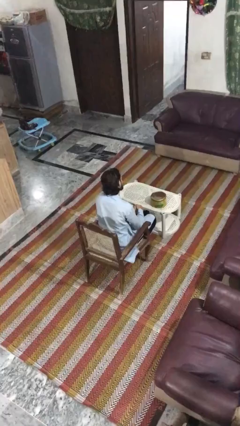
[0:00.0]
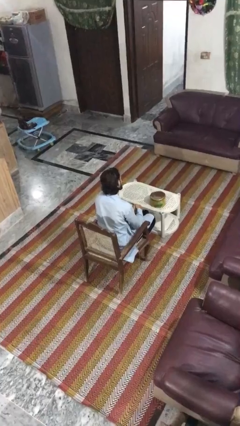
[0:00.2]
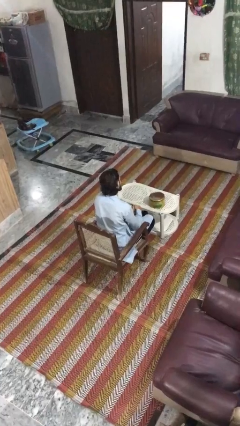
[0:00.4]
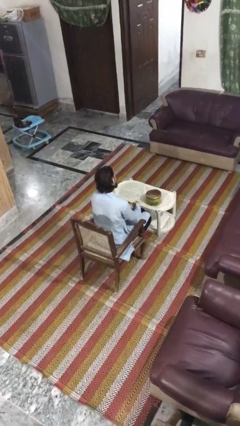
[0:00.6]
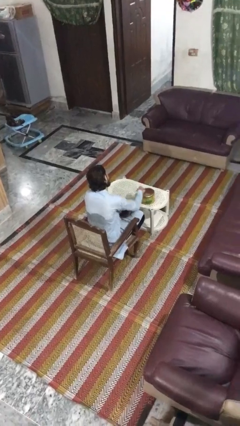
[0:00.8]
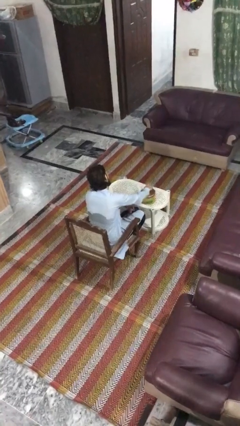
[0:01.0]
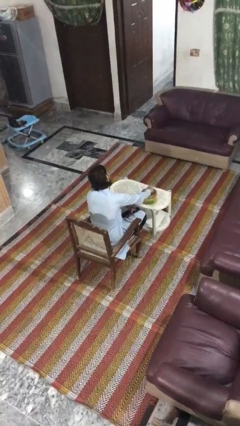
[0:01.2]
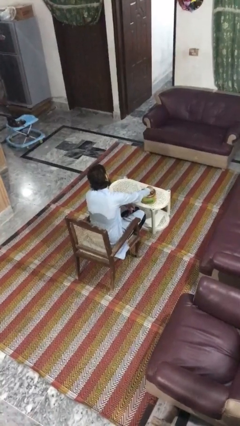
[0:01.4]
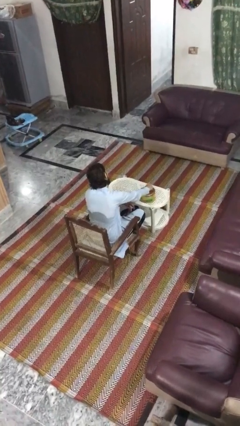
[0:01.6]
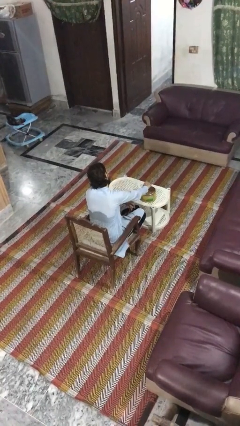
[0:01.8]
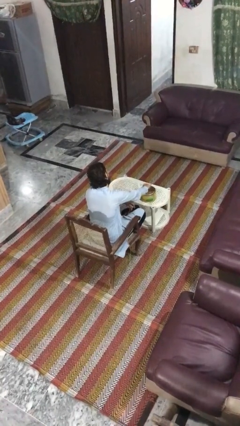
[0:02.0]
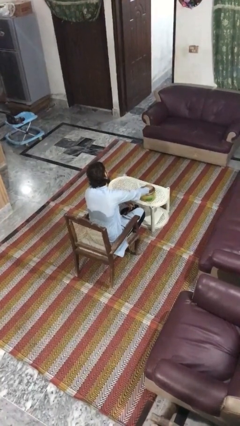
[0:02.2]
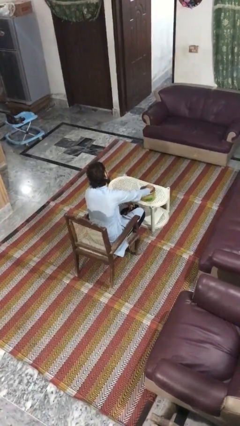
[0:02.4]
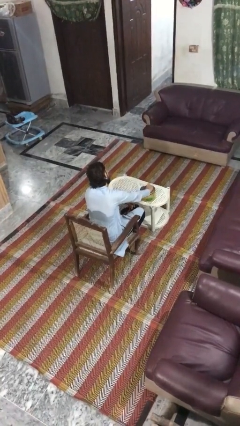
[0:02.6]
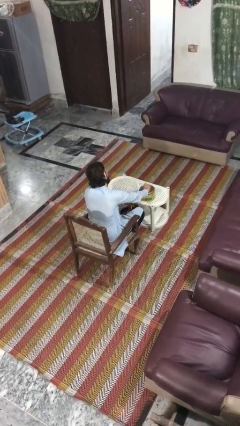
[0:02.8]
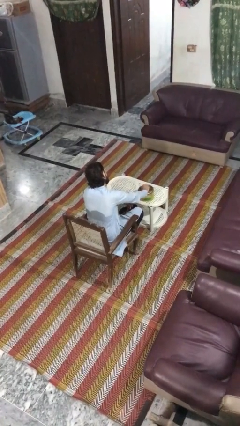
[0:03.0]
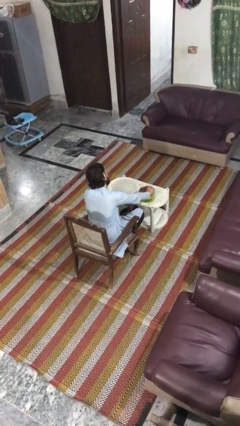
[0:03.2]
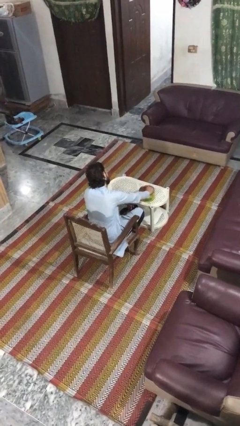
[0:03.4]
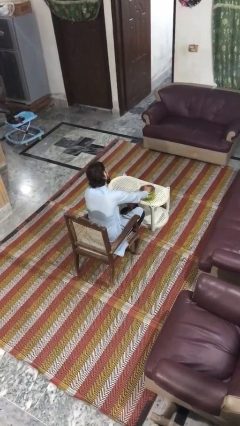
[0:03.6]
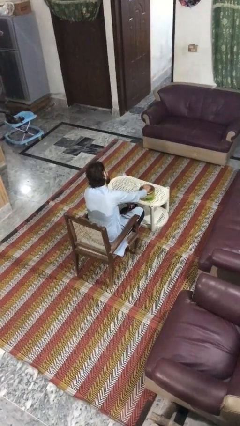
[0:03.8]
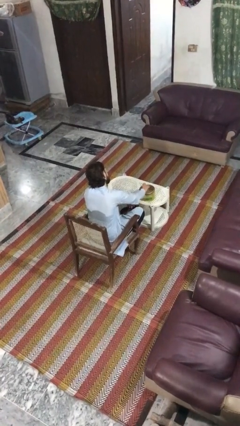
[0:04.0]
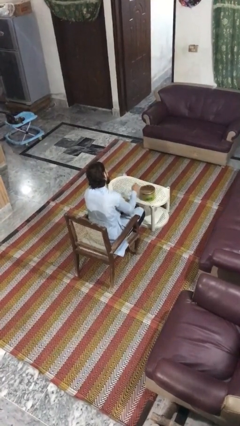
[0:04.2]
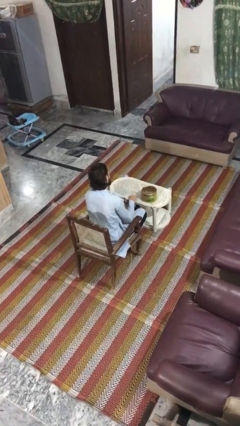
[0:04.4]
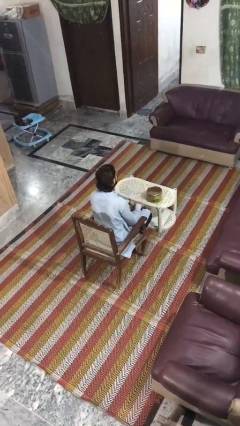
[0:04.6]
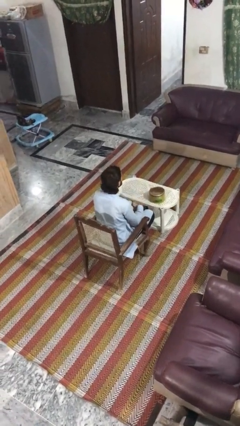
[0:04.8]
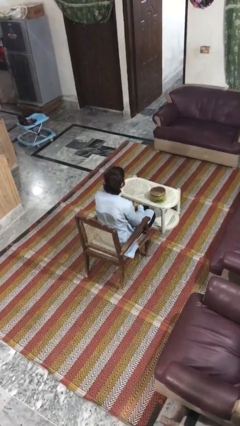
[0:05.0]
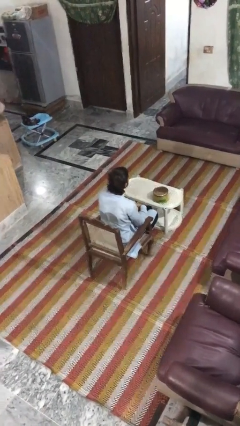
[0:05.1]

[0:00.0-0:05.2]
person taps object with finger

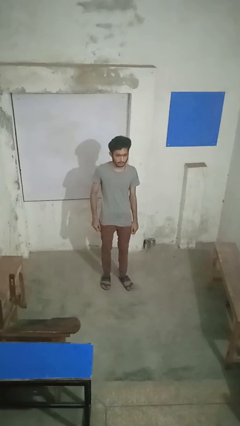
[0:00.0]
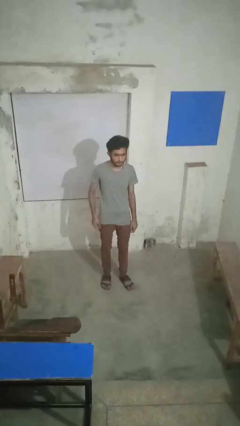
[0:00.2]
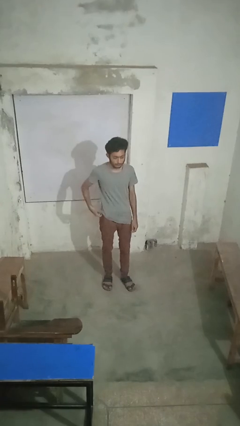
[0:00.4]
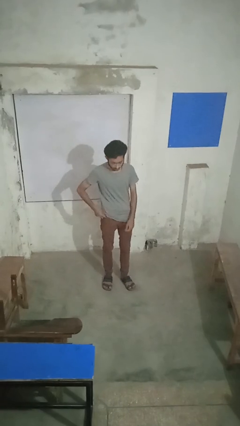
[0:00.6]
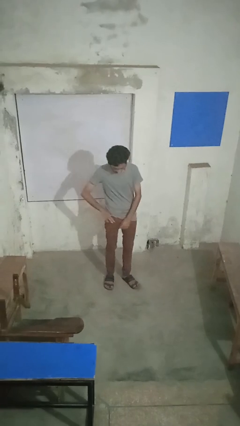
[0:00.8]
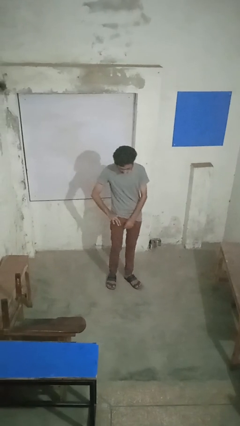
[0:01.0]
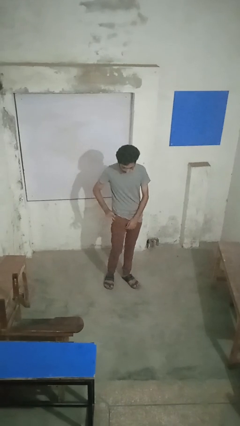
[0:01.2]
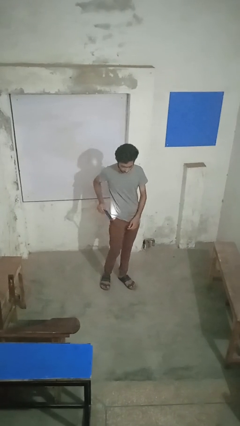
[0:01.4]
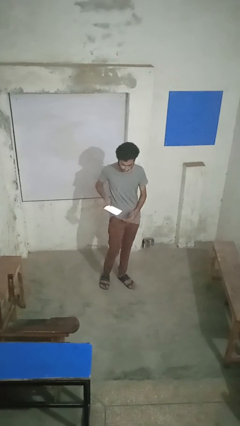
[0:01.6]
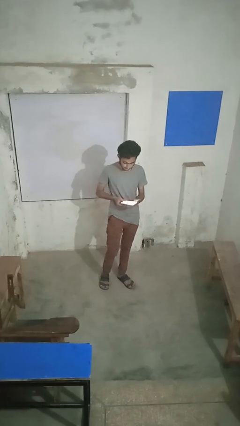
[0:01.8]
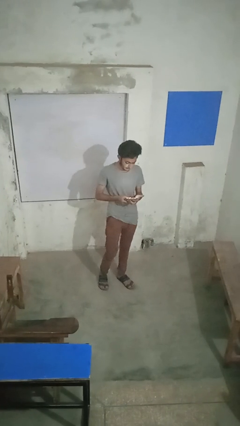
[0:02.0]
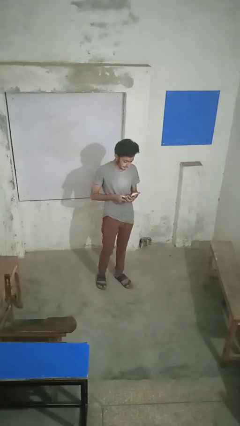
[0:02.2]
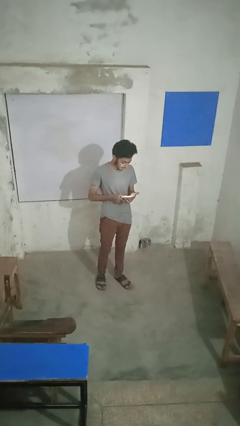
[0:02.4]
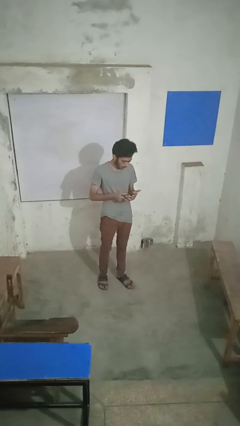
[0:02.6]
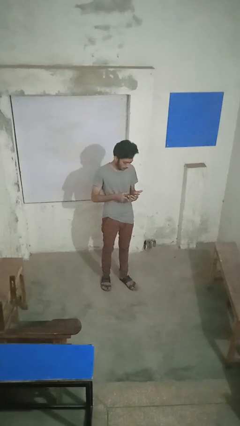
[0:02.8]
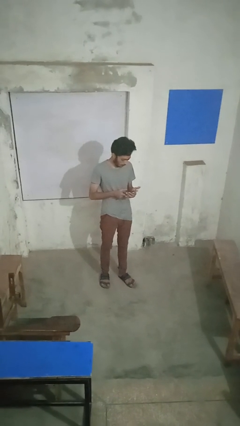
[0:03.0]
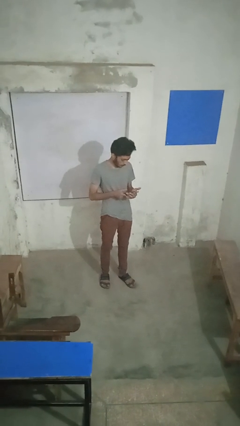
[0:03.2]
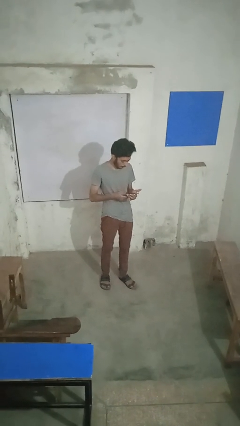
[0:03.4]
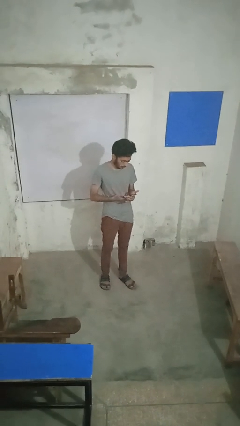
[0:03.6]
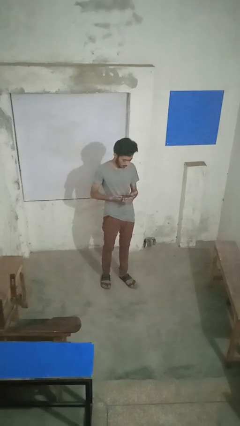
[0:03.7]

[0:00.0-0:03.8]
person takes phone from pocket

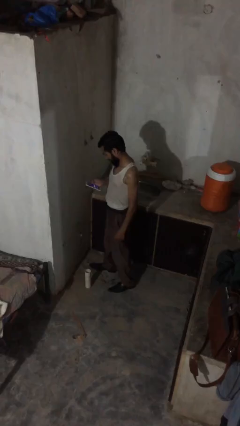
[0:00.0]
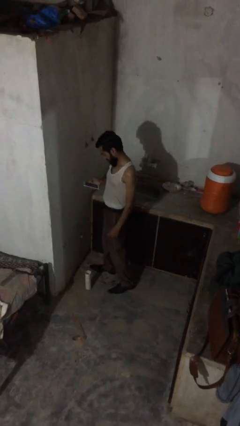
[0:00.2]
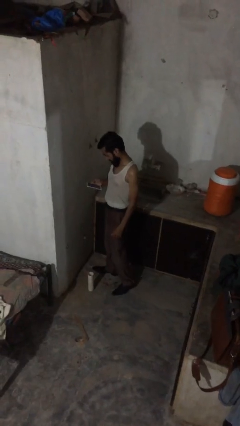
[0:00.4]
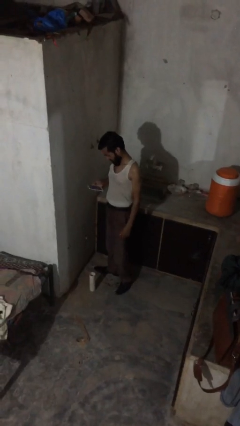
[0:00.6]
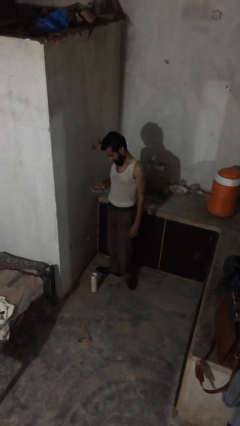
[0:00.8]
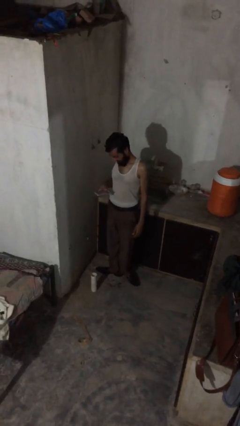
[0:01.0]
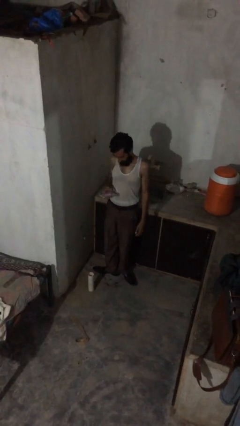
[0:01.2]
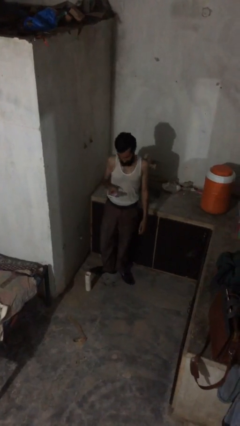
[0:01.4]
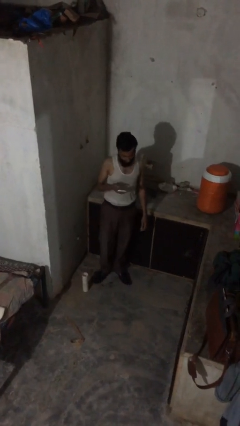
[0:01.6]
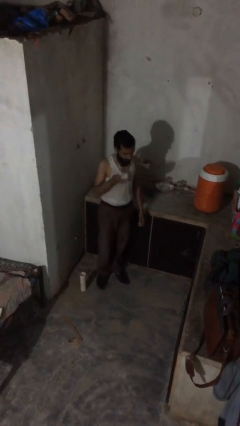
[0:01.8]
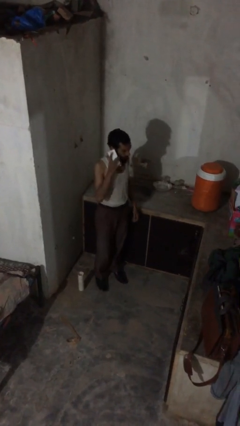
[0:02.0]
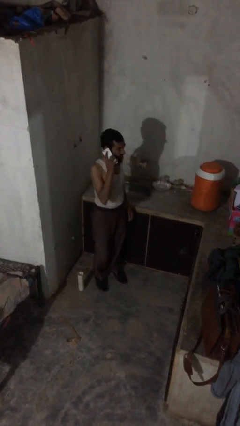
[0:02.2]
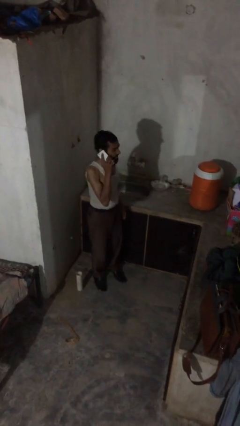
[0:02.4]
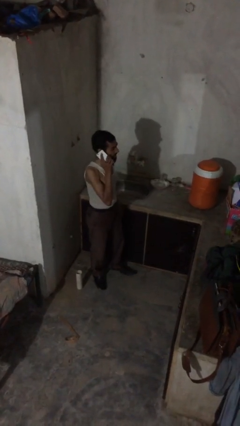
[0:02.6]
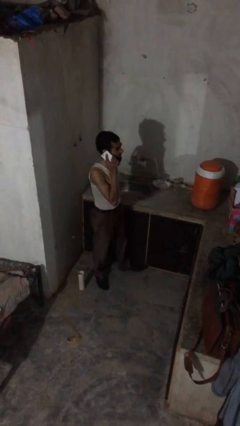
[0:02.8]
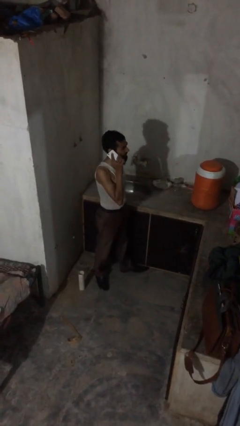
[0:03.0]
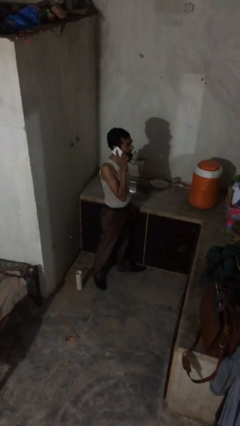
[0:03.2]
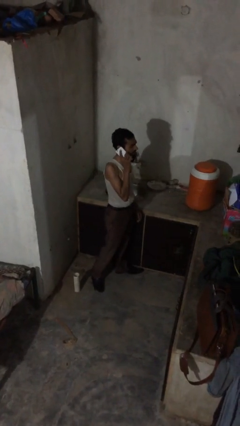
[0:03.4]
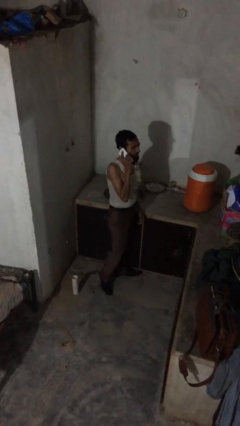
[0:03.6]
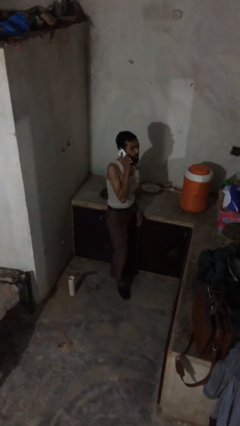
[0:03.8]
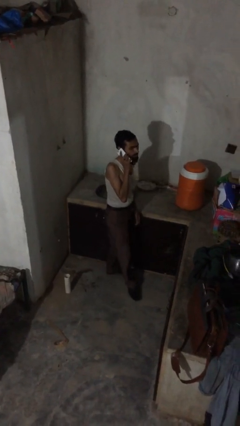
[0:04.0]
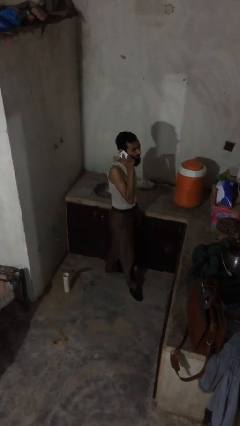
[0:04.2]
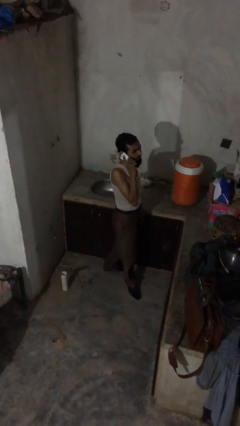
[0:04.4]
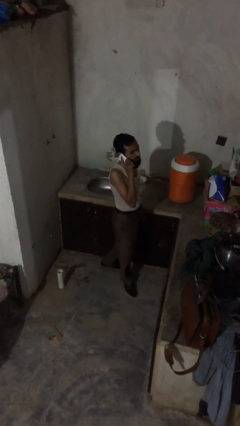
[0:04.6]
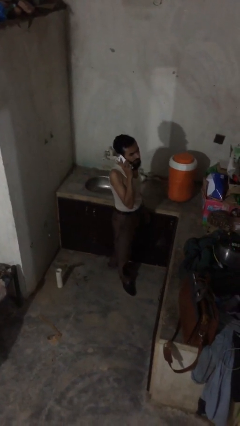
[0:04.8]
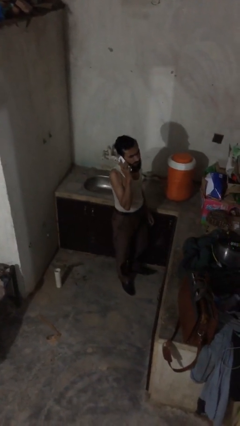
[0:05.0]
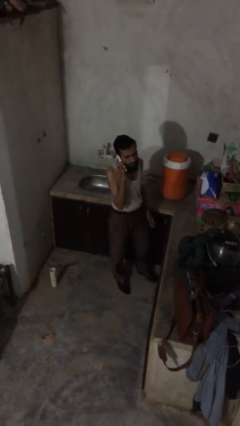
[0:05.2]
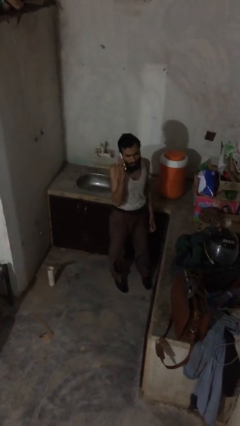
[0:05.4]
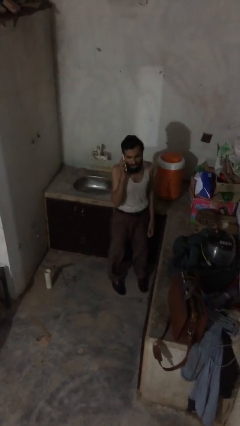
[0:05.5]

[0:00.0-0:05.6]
person talks on phone

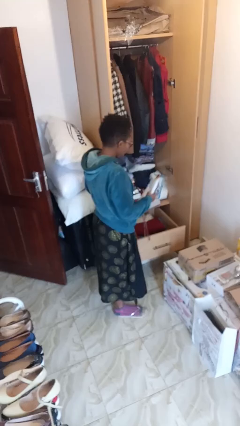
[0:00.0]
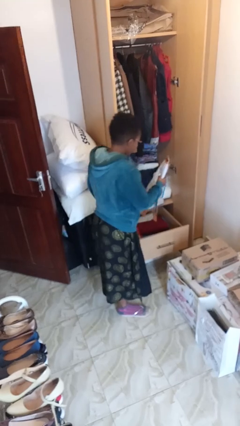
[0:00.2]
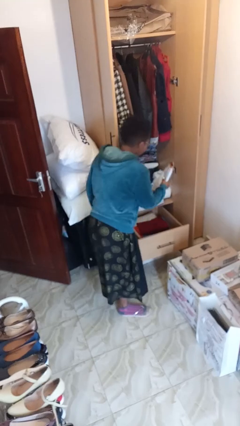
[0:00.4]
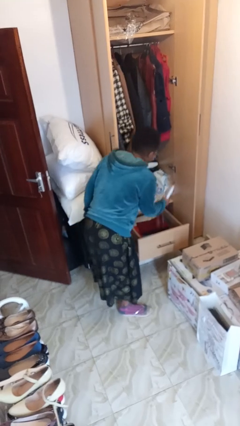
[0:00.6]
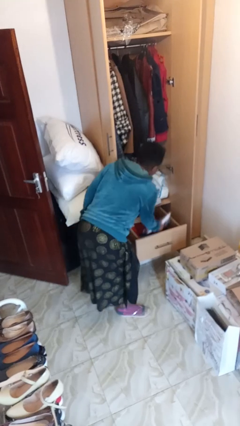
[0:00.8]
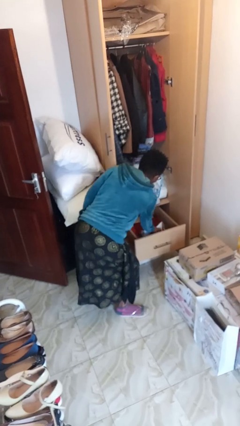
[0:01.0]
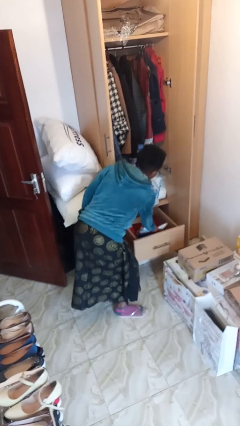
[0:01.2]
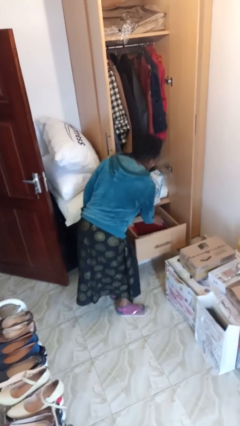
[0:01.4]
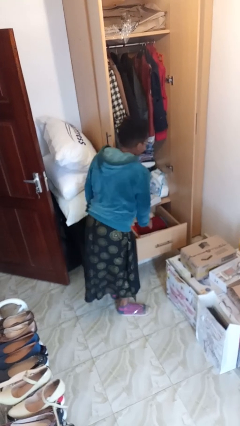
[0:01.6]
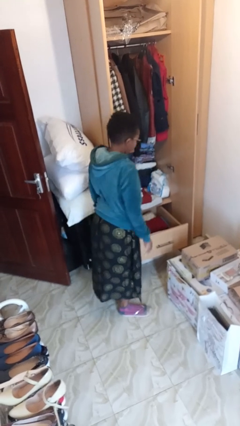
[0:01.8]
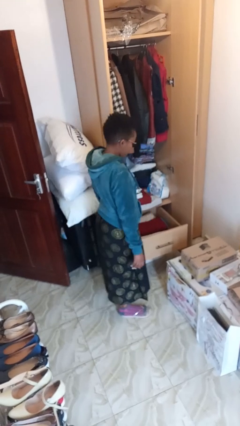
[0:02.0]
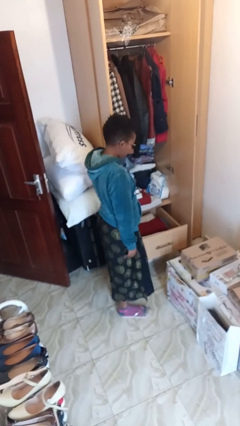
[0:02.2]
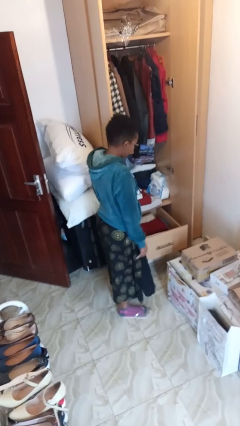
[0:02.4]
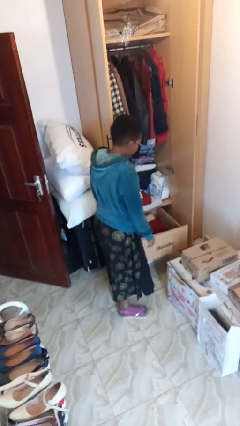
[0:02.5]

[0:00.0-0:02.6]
person puts clothes into dresser

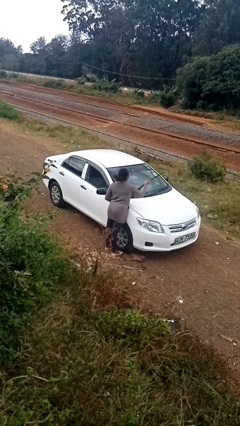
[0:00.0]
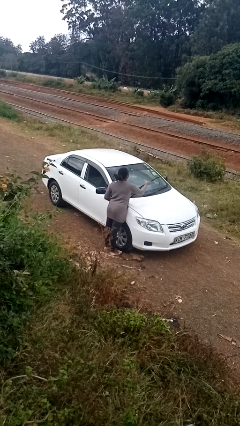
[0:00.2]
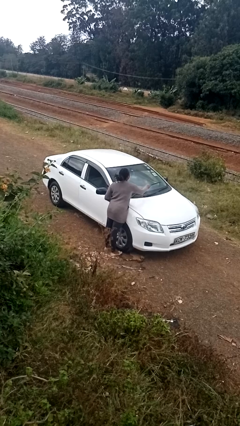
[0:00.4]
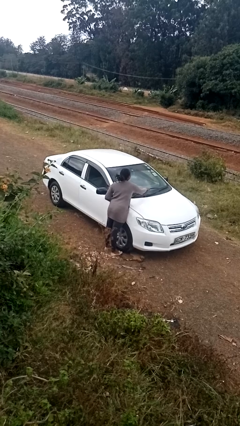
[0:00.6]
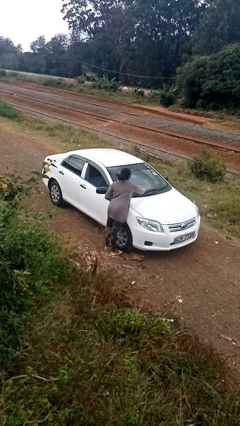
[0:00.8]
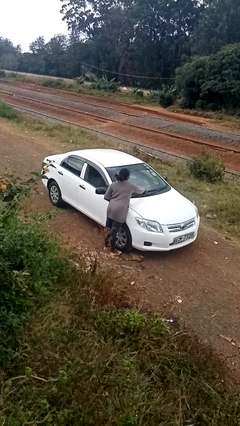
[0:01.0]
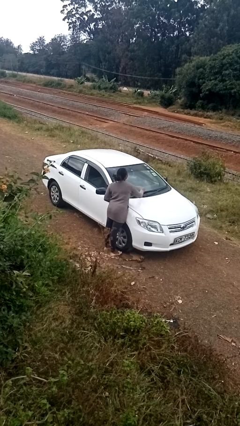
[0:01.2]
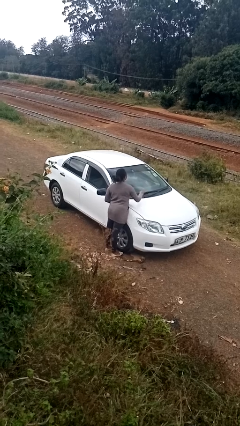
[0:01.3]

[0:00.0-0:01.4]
person flips down car wipers
